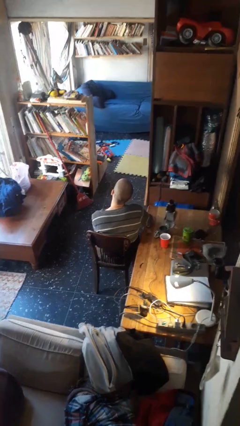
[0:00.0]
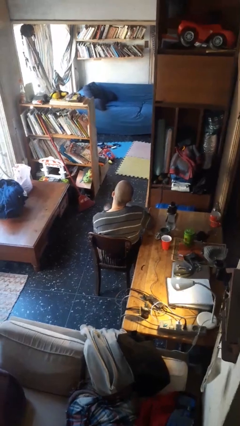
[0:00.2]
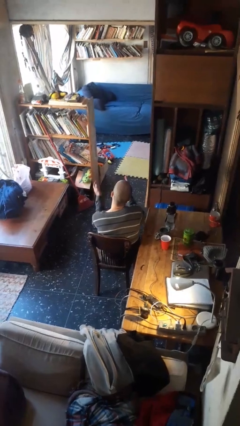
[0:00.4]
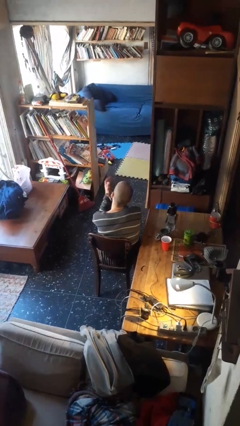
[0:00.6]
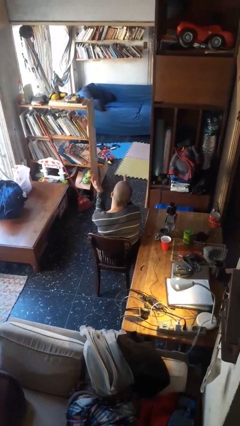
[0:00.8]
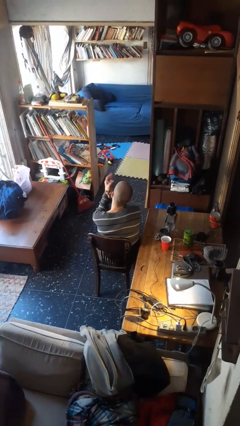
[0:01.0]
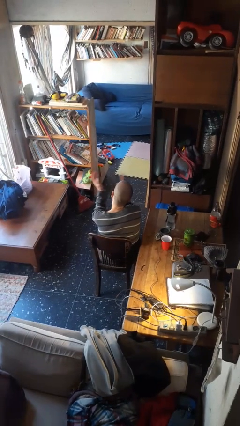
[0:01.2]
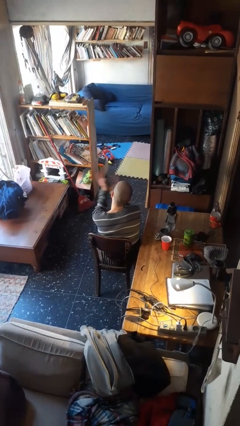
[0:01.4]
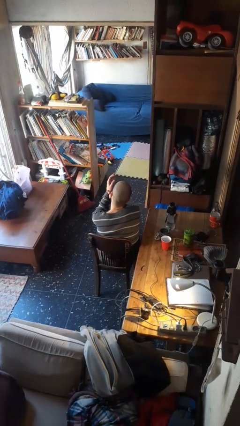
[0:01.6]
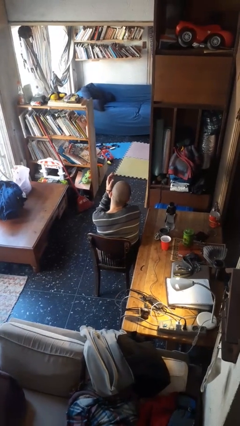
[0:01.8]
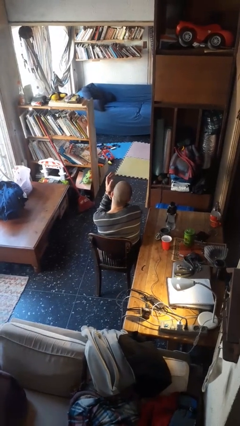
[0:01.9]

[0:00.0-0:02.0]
person claps hands

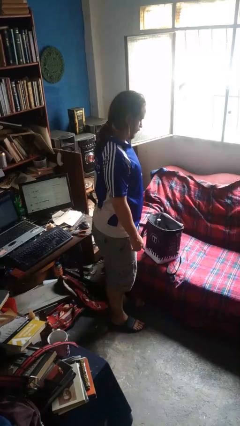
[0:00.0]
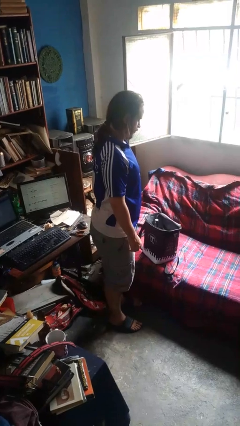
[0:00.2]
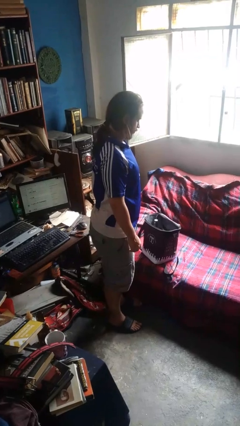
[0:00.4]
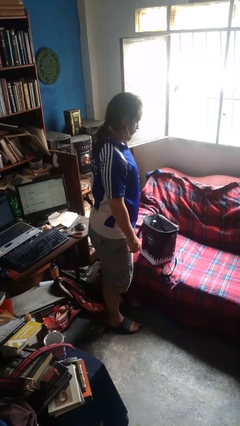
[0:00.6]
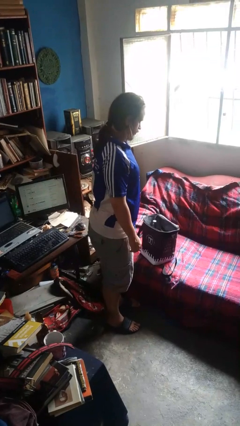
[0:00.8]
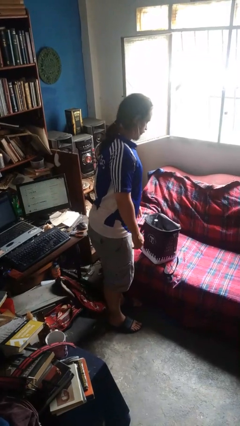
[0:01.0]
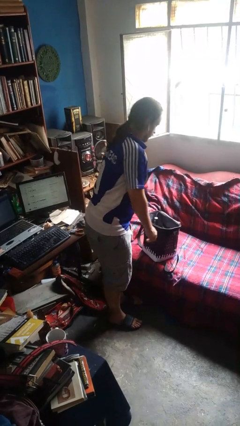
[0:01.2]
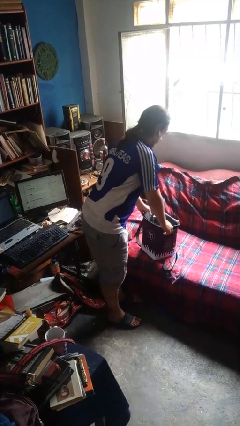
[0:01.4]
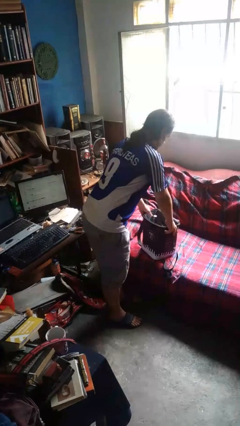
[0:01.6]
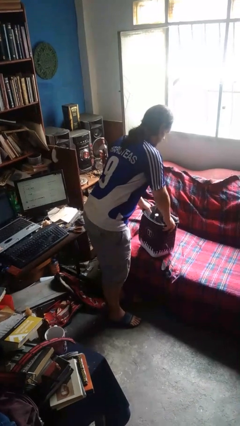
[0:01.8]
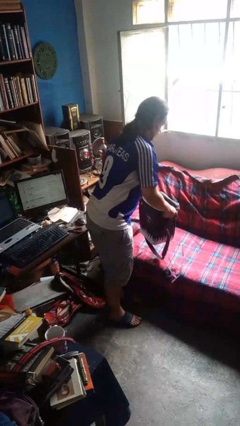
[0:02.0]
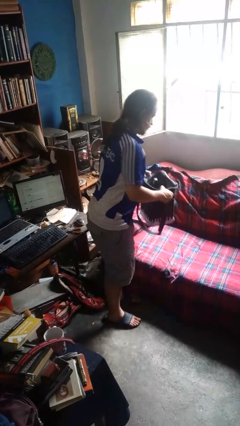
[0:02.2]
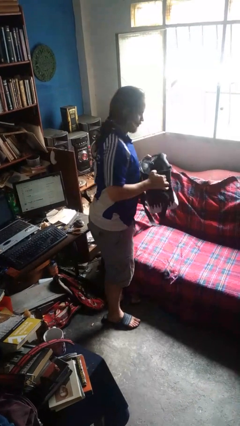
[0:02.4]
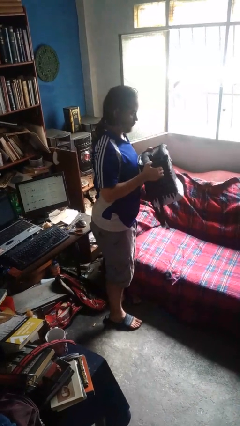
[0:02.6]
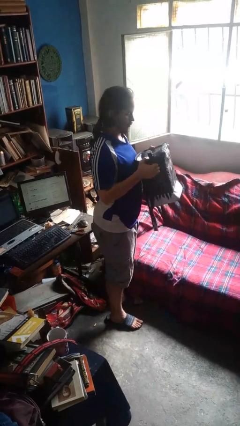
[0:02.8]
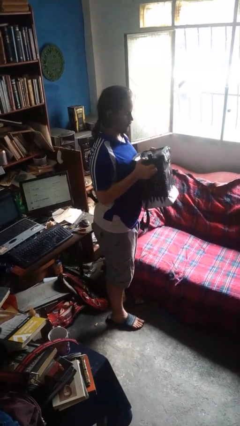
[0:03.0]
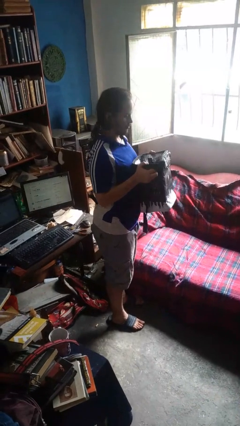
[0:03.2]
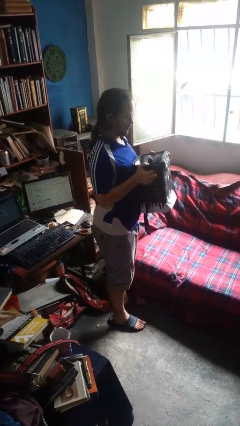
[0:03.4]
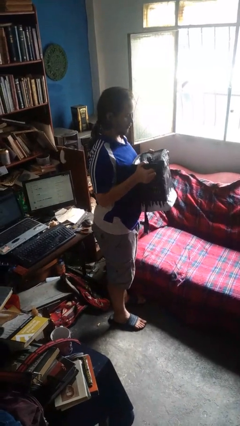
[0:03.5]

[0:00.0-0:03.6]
person picks up object from couch

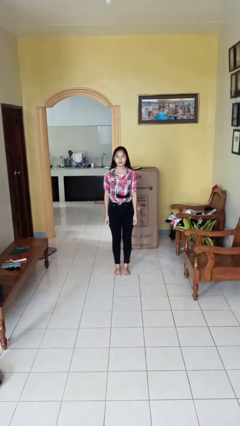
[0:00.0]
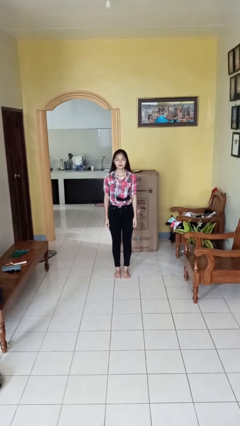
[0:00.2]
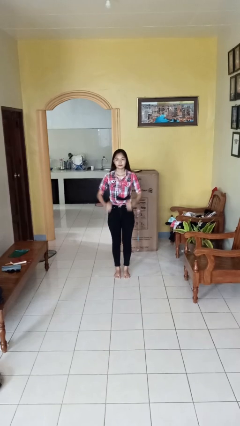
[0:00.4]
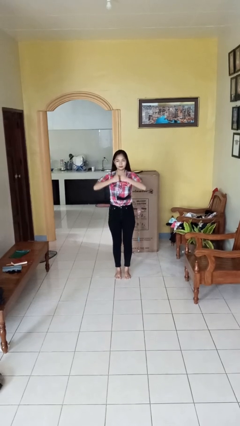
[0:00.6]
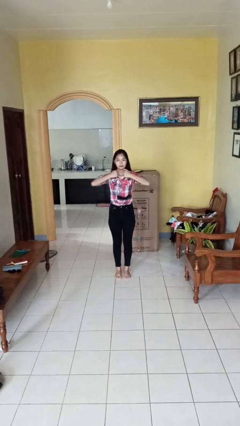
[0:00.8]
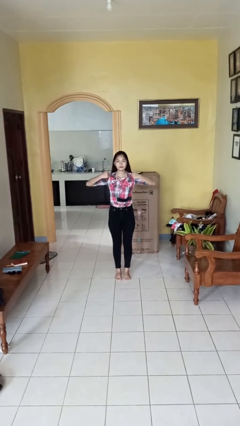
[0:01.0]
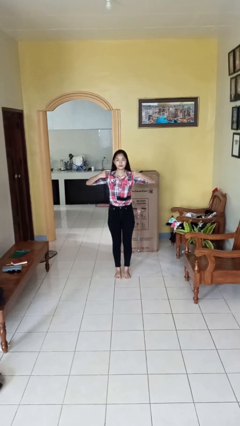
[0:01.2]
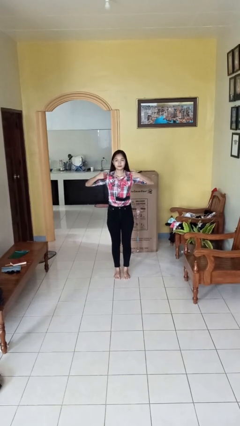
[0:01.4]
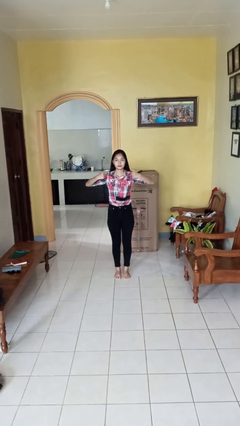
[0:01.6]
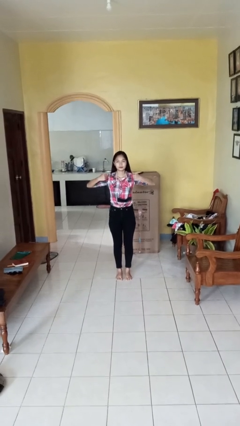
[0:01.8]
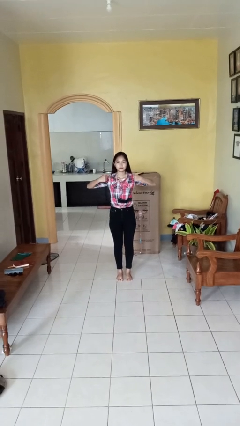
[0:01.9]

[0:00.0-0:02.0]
person gestures zoom in

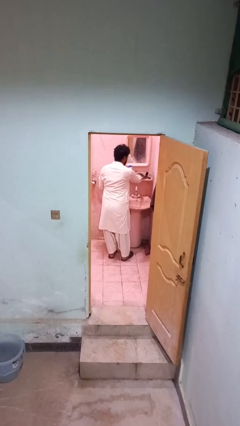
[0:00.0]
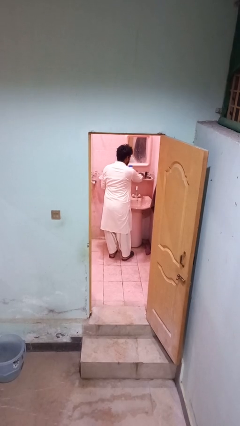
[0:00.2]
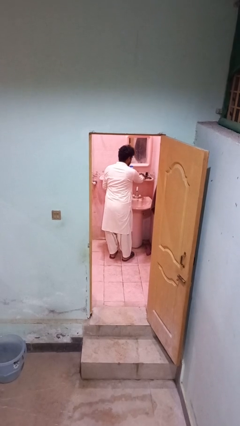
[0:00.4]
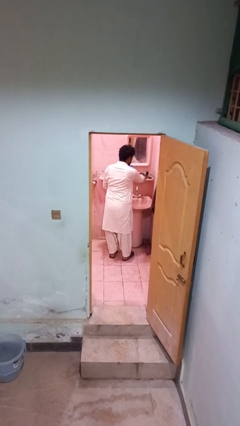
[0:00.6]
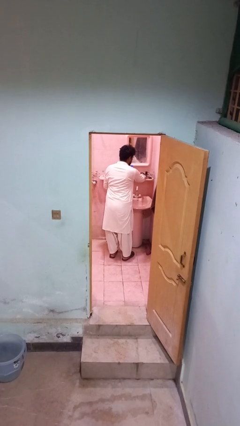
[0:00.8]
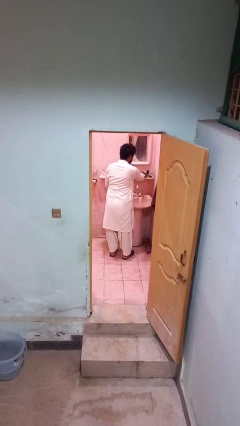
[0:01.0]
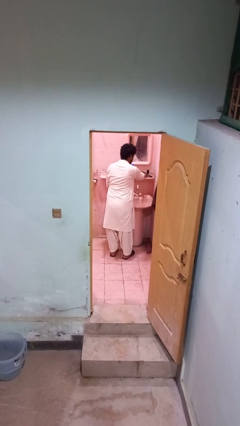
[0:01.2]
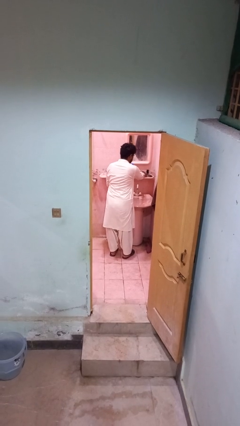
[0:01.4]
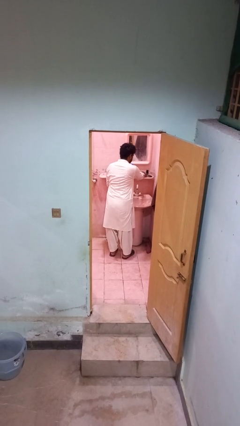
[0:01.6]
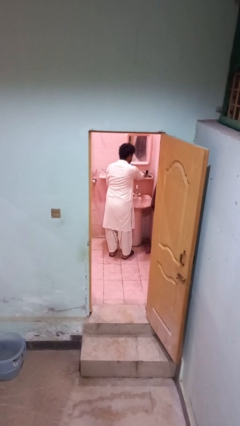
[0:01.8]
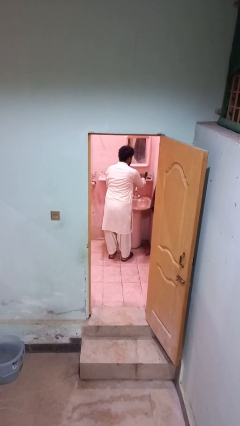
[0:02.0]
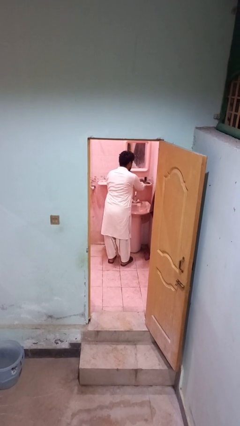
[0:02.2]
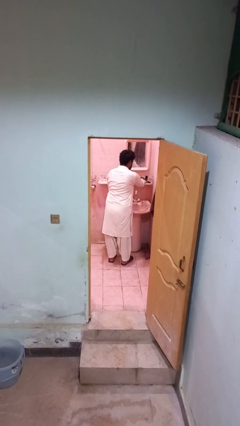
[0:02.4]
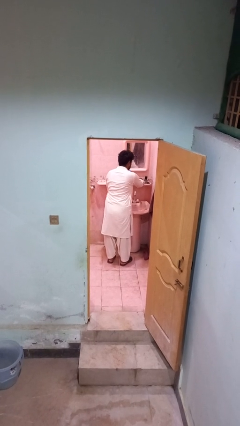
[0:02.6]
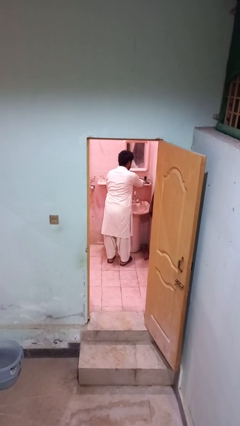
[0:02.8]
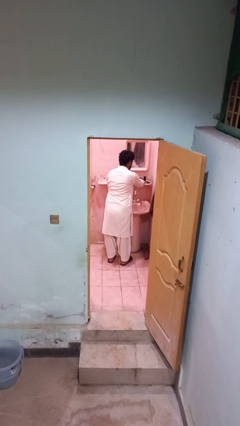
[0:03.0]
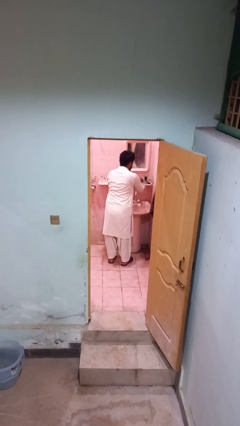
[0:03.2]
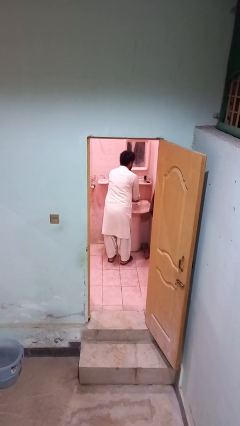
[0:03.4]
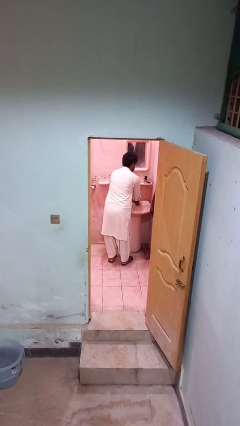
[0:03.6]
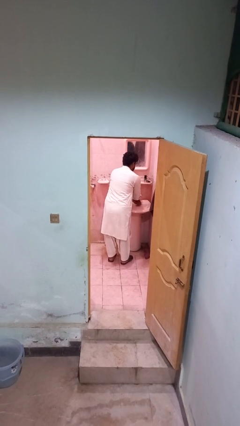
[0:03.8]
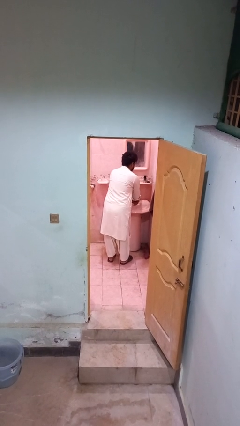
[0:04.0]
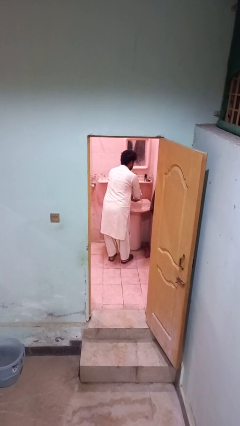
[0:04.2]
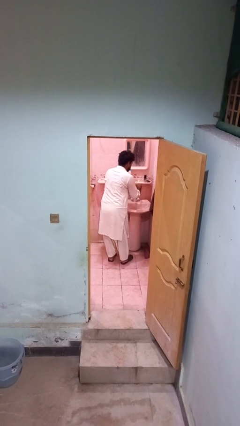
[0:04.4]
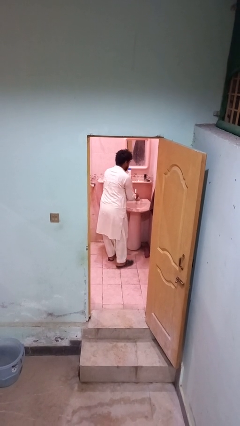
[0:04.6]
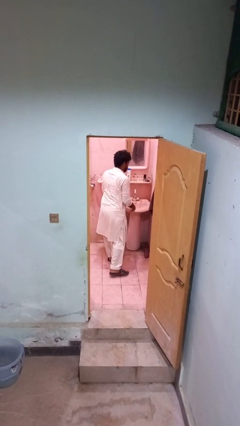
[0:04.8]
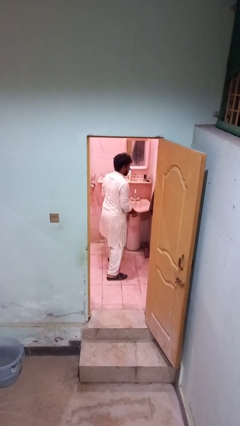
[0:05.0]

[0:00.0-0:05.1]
person washes hands

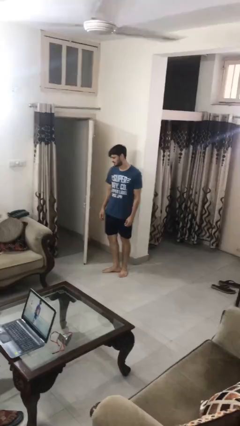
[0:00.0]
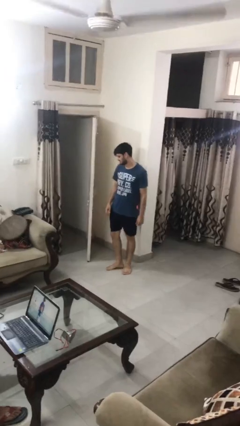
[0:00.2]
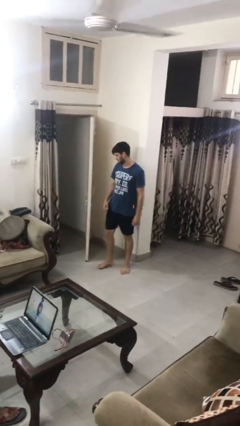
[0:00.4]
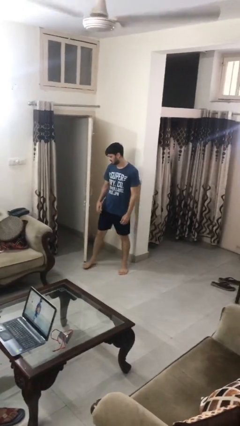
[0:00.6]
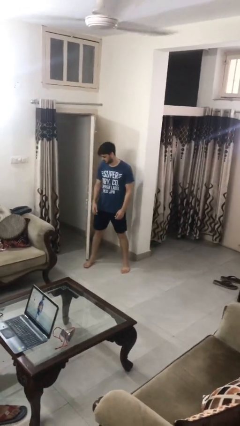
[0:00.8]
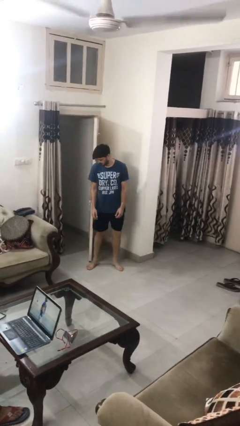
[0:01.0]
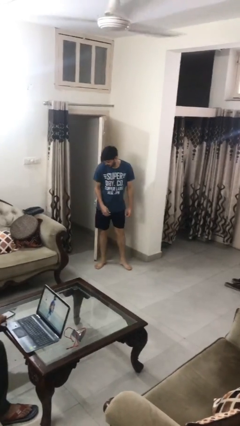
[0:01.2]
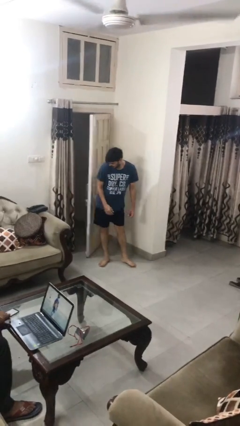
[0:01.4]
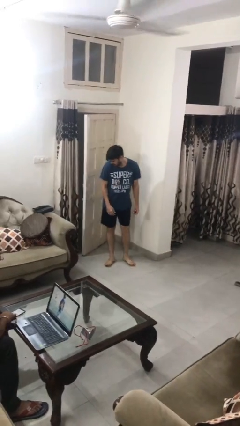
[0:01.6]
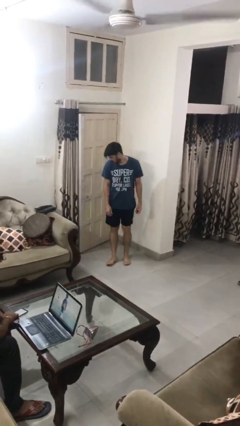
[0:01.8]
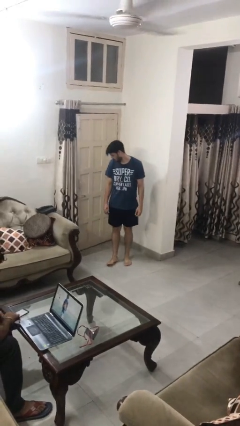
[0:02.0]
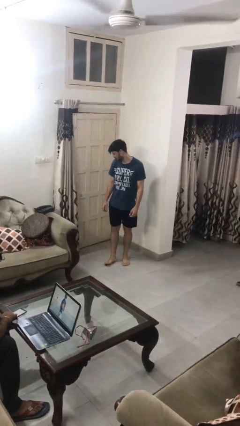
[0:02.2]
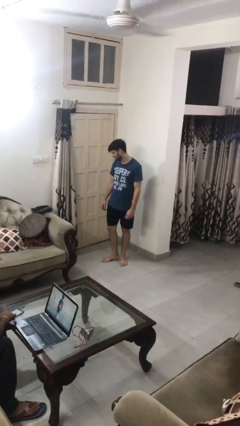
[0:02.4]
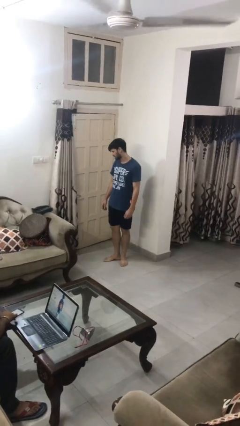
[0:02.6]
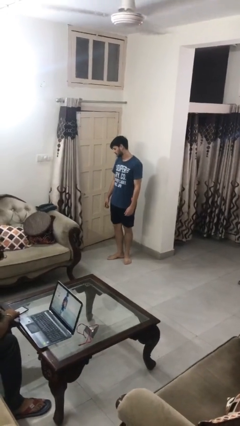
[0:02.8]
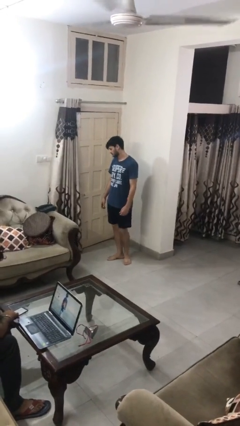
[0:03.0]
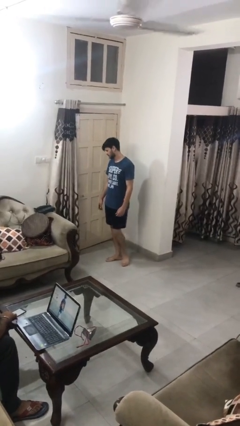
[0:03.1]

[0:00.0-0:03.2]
person closes door with hip

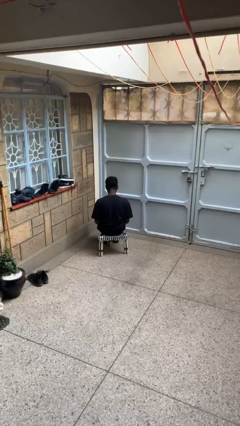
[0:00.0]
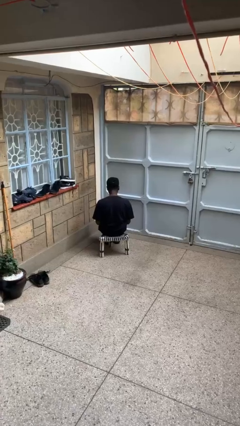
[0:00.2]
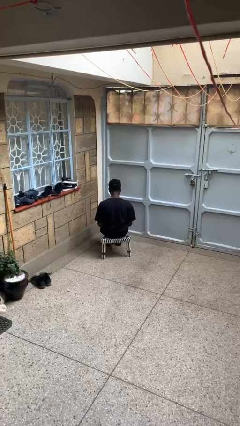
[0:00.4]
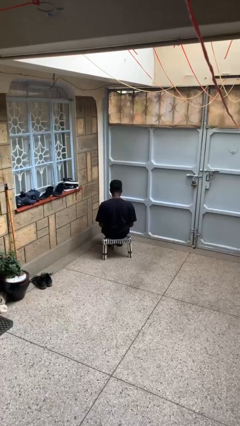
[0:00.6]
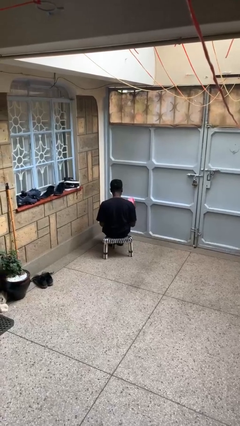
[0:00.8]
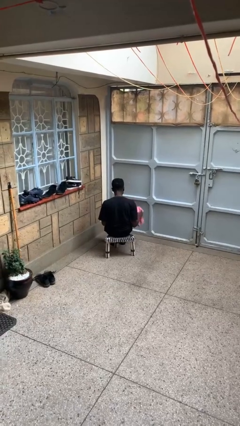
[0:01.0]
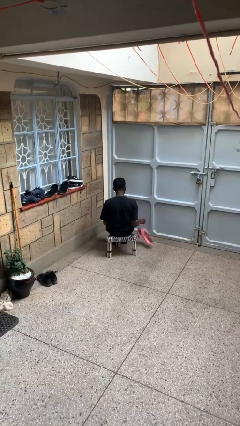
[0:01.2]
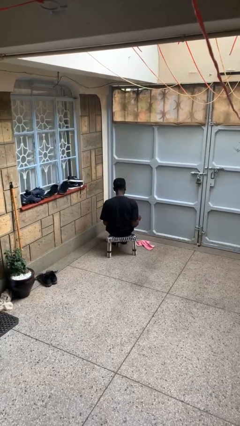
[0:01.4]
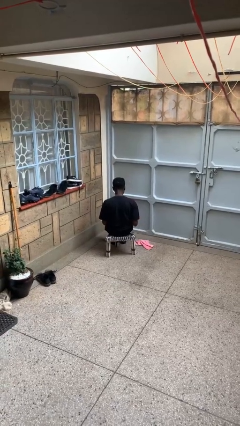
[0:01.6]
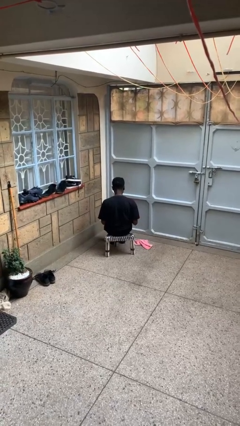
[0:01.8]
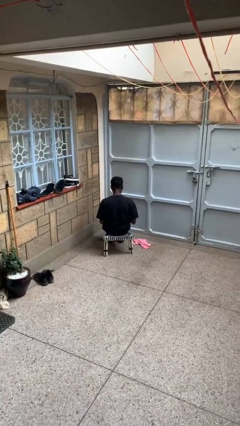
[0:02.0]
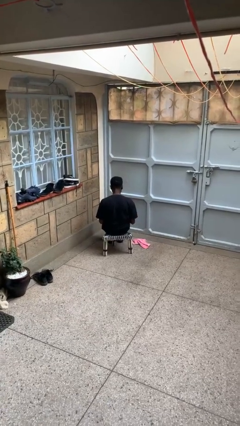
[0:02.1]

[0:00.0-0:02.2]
person throws object to ground
